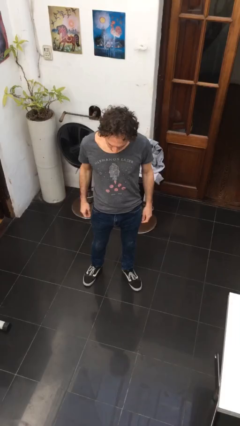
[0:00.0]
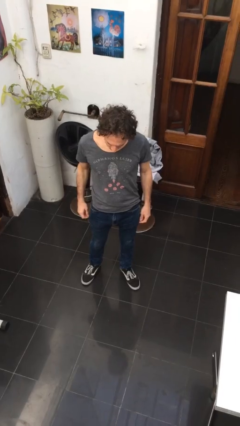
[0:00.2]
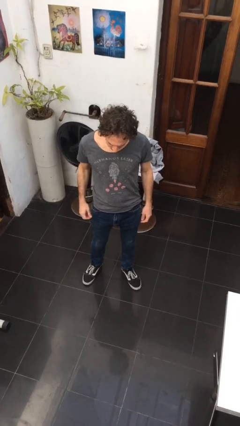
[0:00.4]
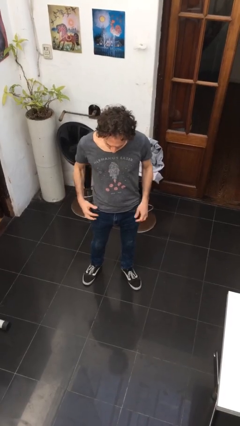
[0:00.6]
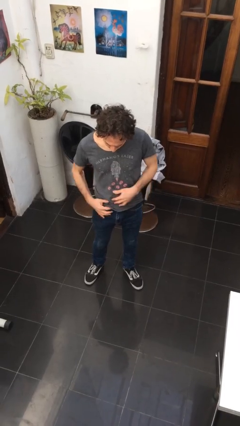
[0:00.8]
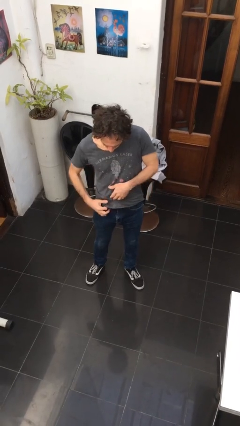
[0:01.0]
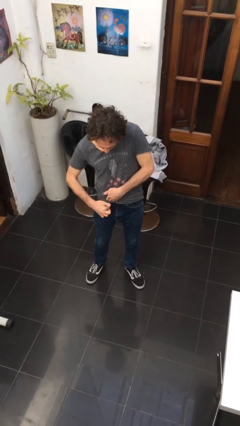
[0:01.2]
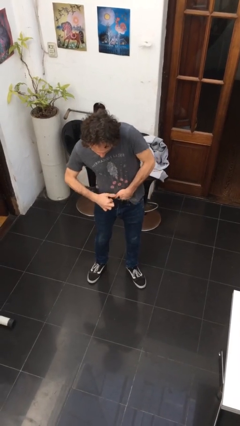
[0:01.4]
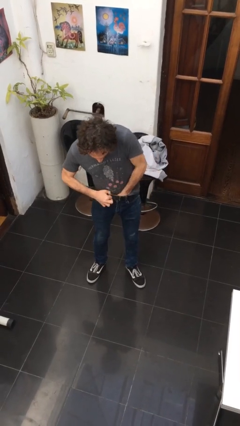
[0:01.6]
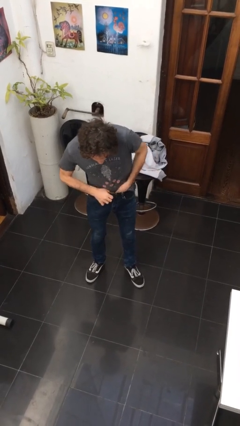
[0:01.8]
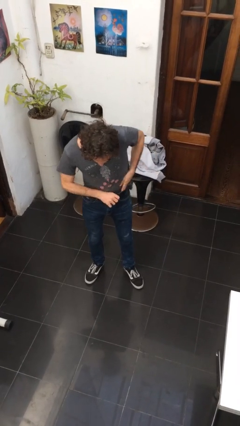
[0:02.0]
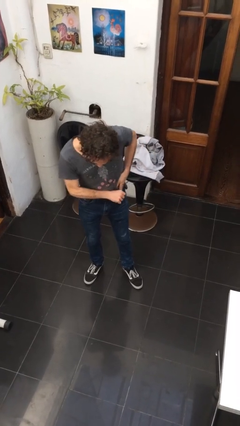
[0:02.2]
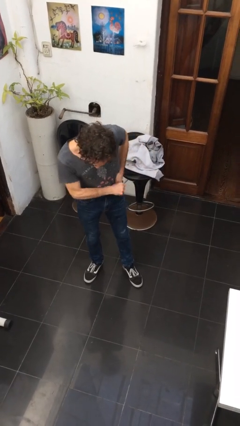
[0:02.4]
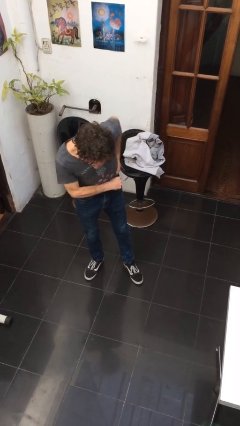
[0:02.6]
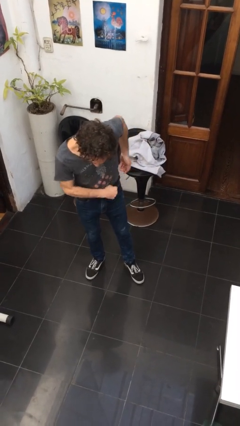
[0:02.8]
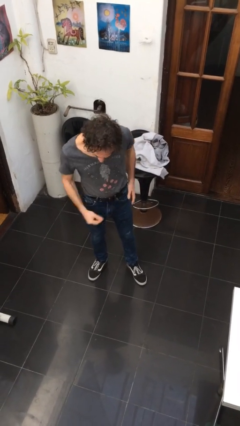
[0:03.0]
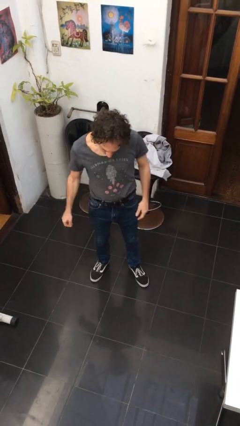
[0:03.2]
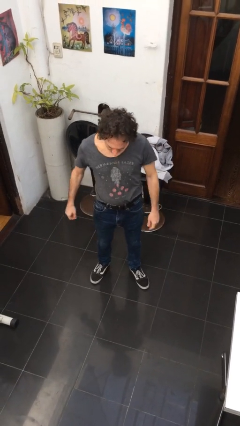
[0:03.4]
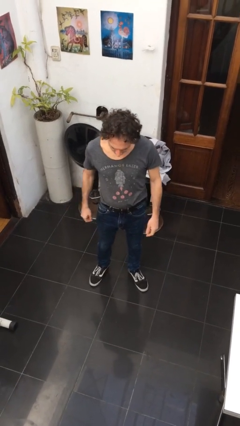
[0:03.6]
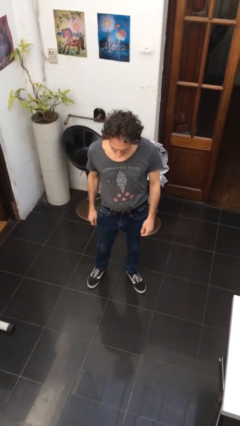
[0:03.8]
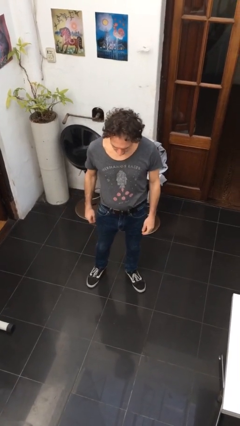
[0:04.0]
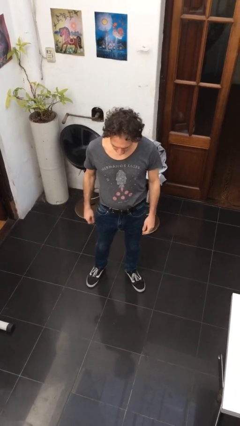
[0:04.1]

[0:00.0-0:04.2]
person tucks in shirt

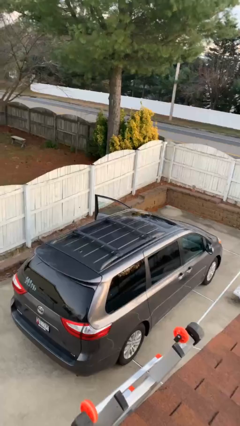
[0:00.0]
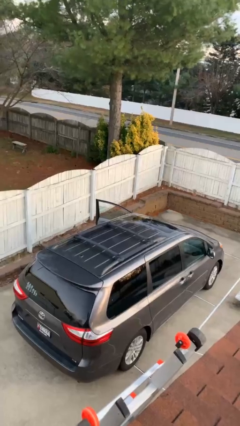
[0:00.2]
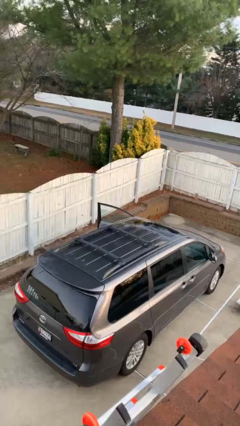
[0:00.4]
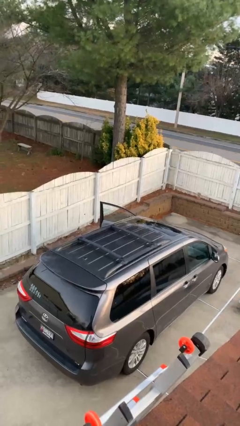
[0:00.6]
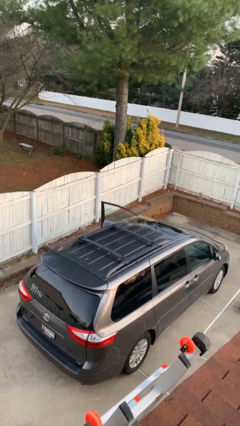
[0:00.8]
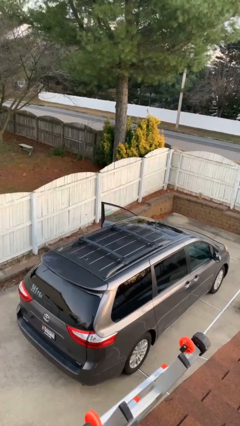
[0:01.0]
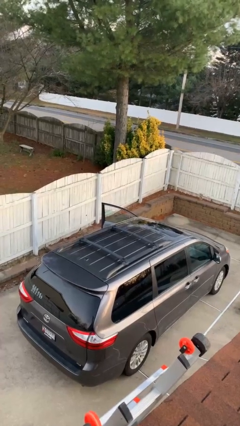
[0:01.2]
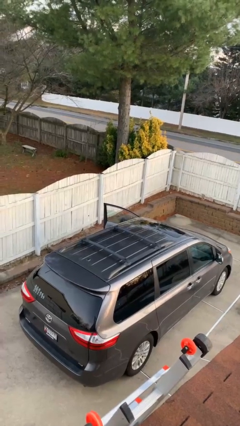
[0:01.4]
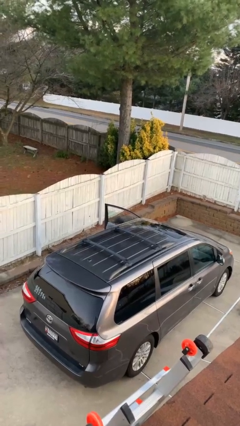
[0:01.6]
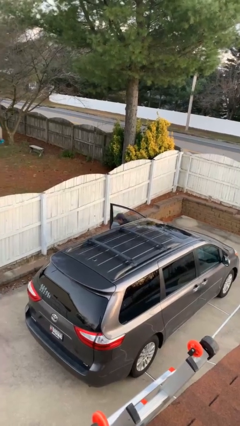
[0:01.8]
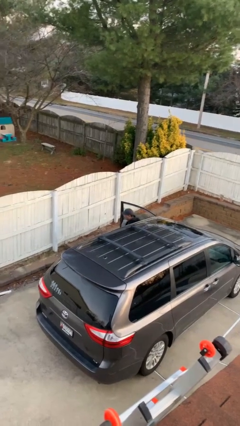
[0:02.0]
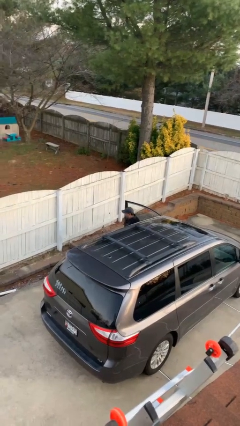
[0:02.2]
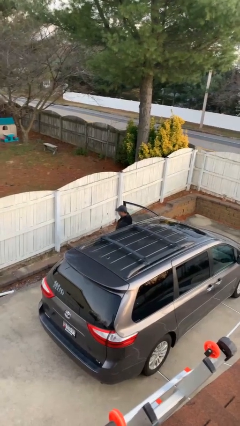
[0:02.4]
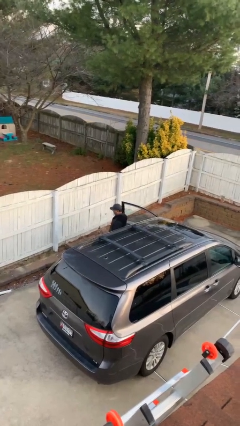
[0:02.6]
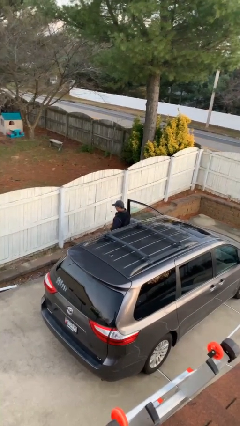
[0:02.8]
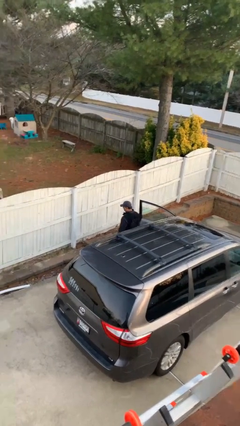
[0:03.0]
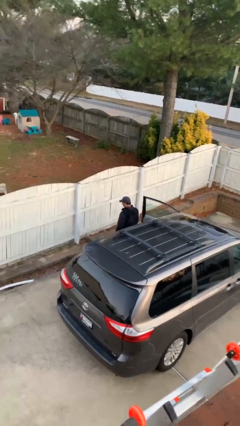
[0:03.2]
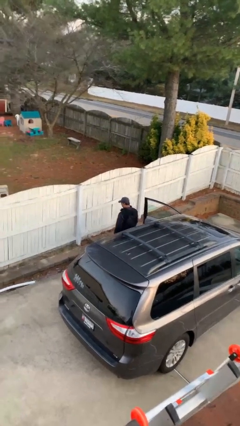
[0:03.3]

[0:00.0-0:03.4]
person exits car

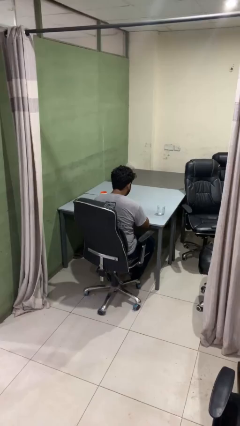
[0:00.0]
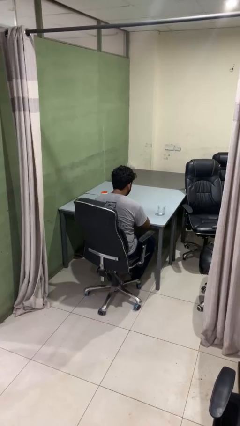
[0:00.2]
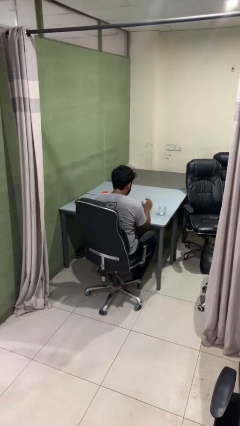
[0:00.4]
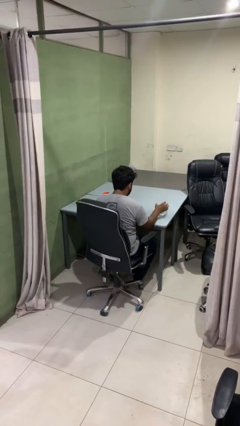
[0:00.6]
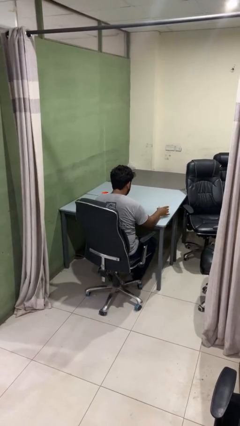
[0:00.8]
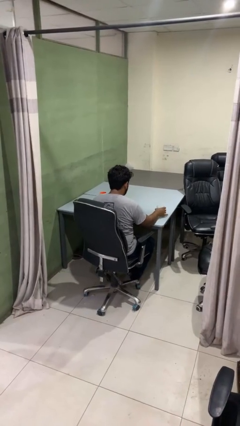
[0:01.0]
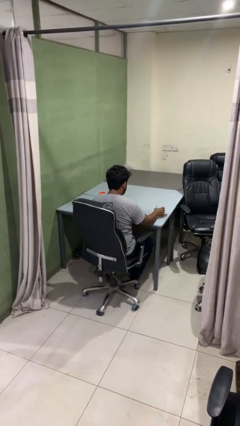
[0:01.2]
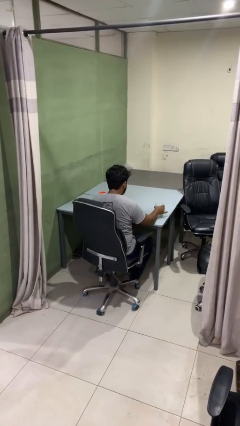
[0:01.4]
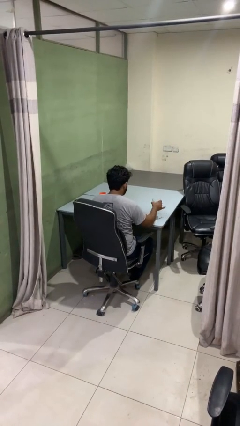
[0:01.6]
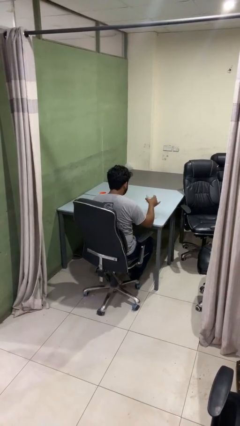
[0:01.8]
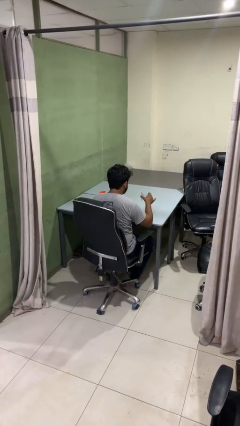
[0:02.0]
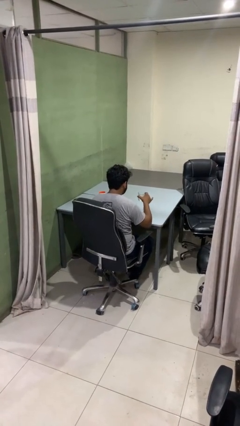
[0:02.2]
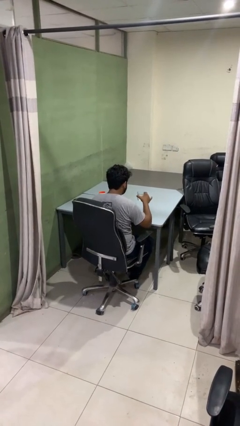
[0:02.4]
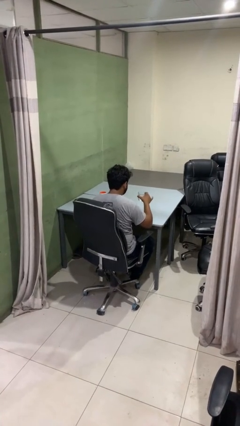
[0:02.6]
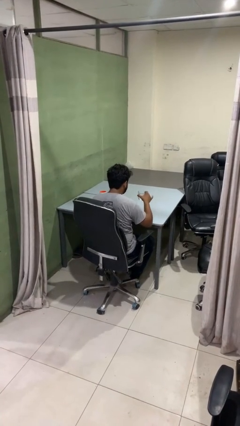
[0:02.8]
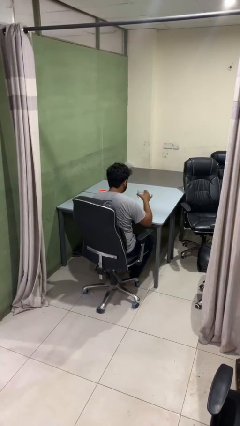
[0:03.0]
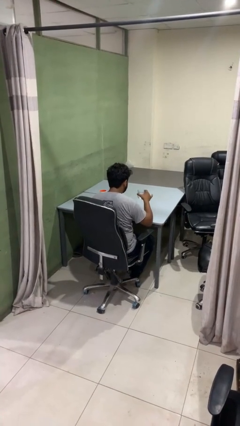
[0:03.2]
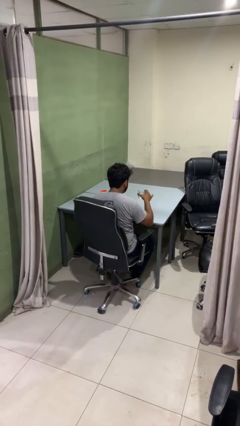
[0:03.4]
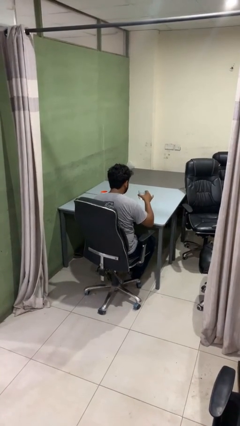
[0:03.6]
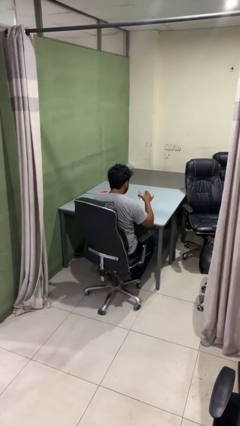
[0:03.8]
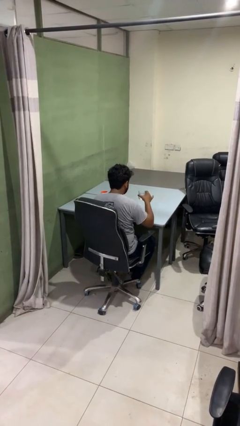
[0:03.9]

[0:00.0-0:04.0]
person picks up object from table

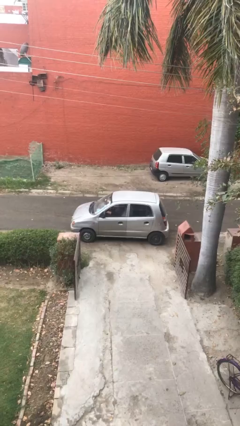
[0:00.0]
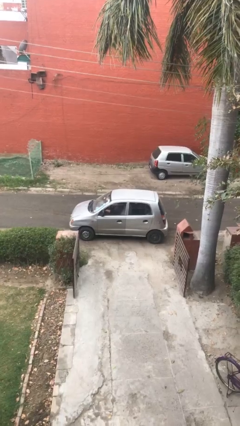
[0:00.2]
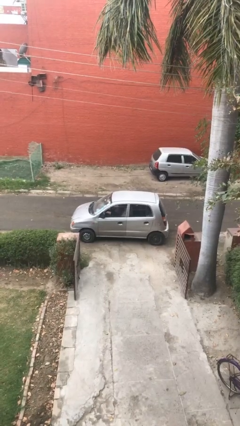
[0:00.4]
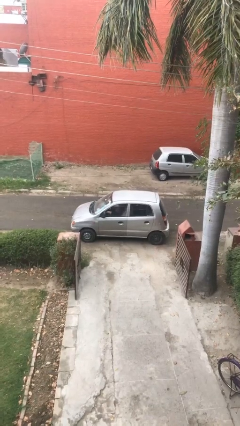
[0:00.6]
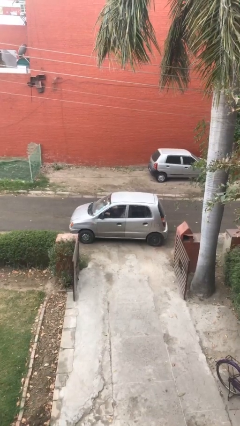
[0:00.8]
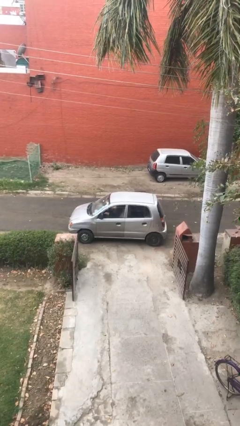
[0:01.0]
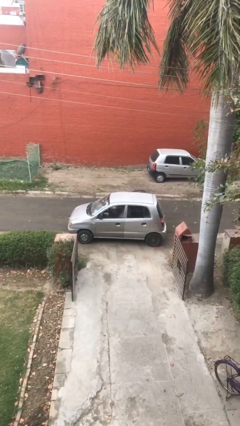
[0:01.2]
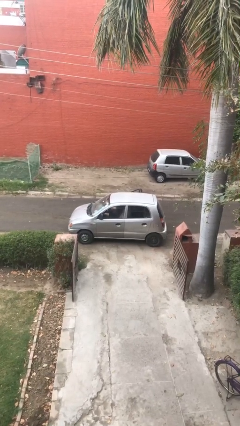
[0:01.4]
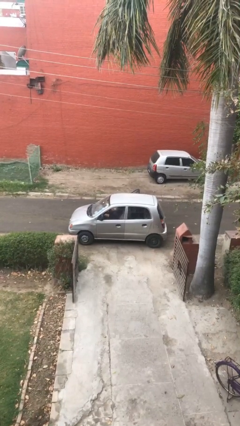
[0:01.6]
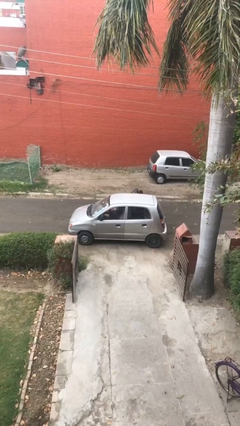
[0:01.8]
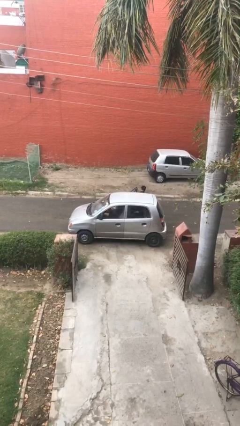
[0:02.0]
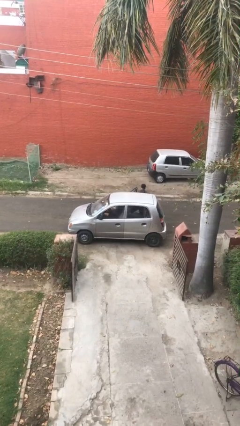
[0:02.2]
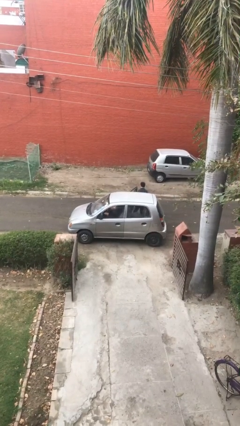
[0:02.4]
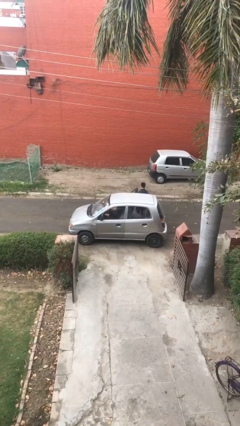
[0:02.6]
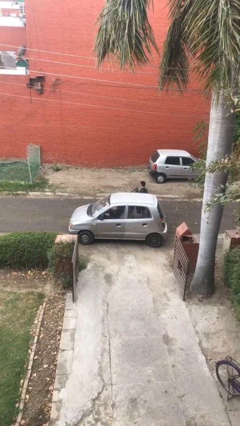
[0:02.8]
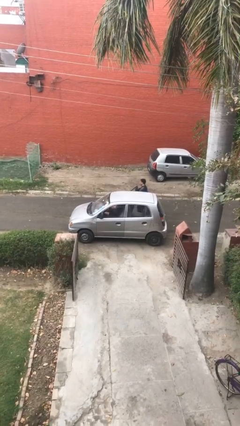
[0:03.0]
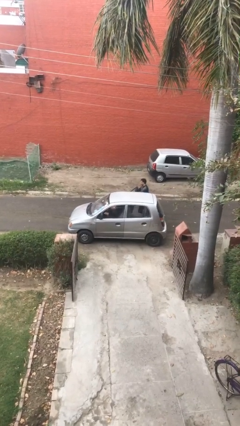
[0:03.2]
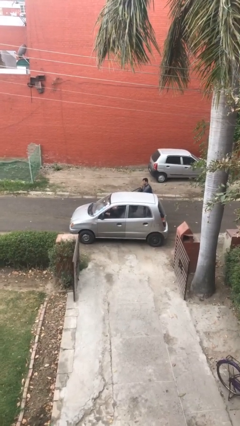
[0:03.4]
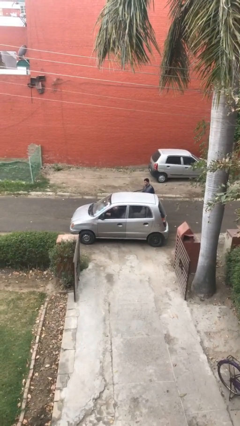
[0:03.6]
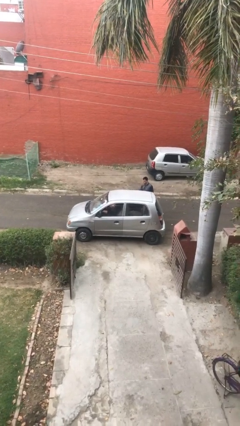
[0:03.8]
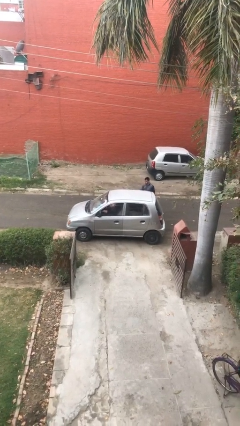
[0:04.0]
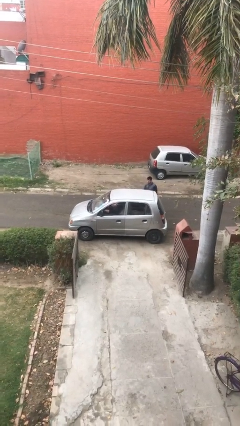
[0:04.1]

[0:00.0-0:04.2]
car drops off person

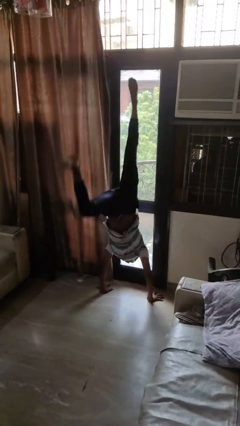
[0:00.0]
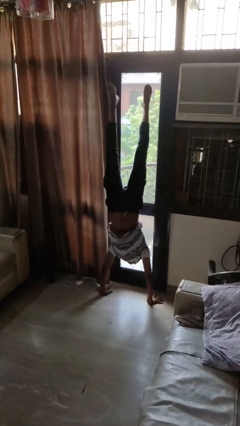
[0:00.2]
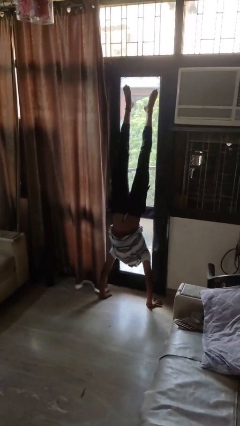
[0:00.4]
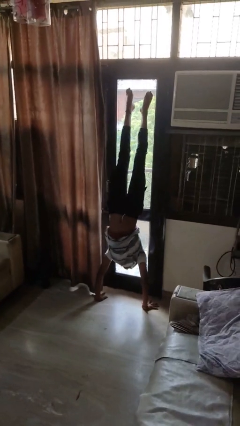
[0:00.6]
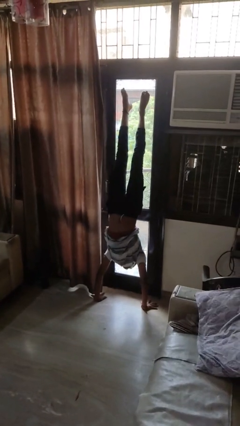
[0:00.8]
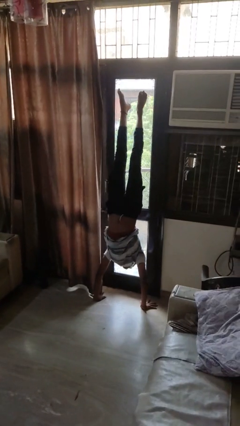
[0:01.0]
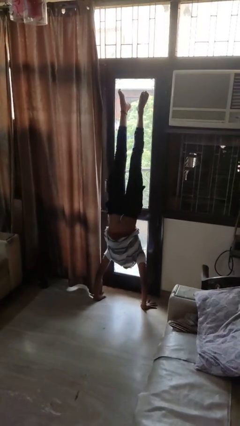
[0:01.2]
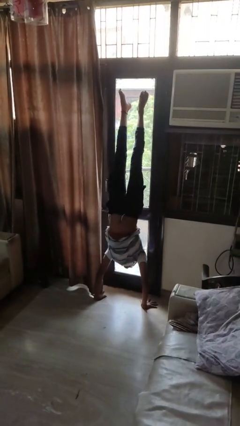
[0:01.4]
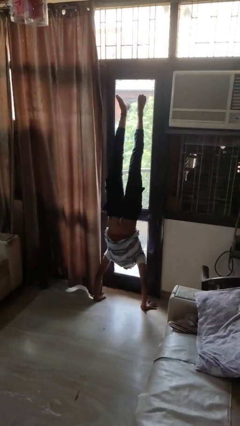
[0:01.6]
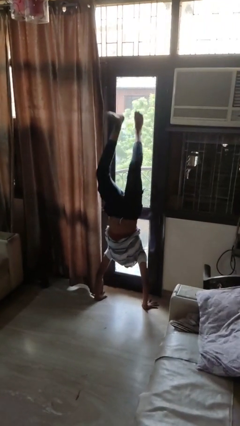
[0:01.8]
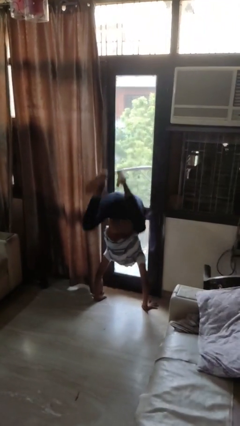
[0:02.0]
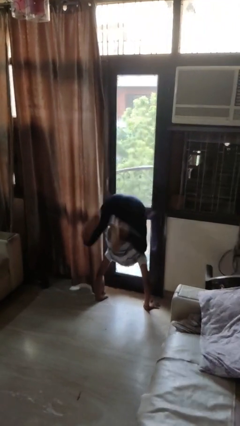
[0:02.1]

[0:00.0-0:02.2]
person handstand
